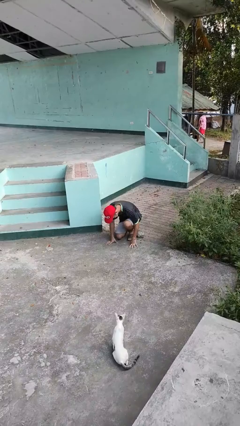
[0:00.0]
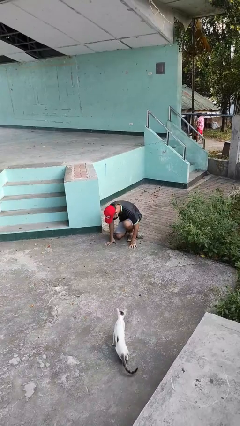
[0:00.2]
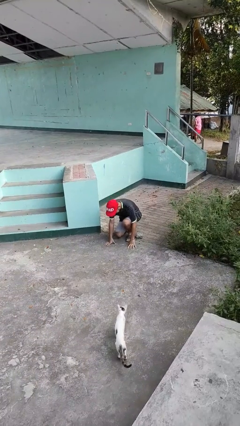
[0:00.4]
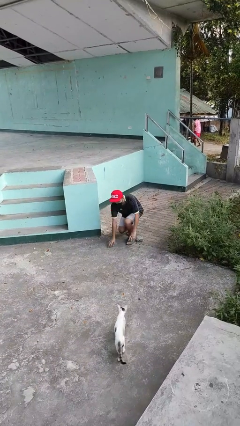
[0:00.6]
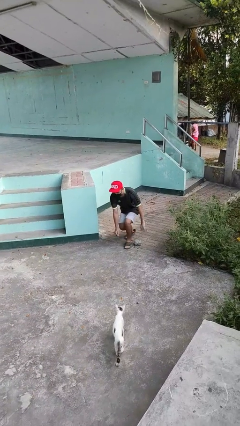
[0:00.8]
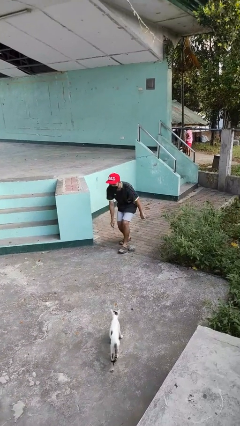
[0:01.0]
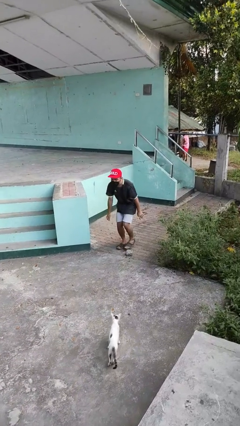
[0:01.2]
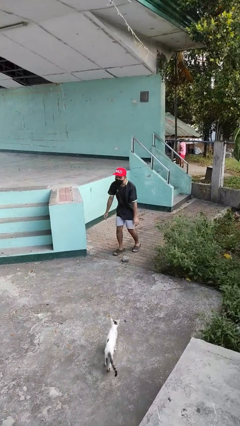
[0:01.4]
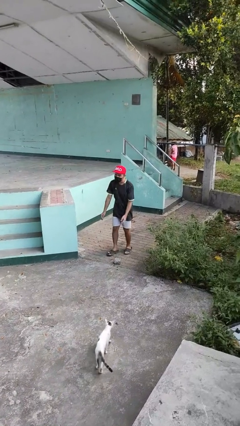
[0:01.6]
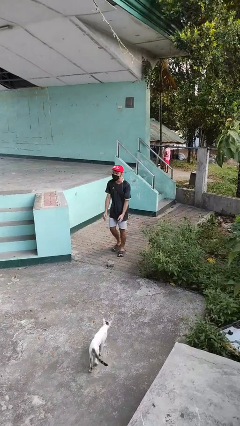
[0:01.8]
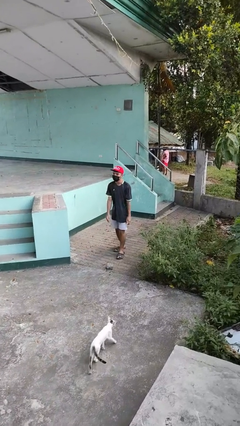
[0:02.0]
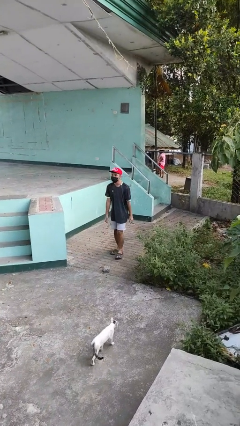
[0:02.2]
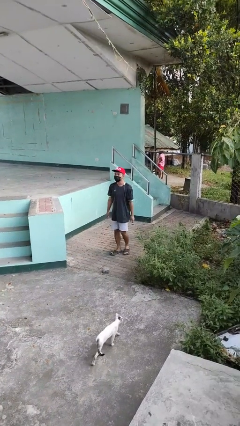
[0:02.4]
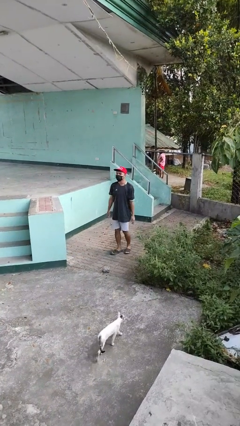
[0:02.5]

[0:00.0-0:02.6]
person stands up from floor

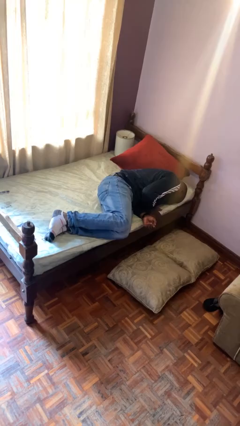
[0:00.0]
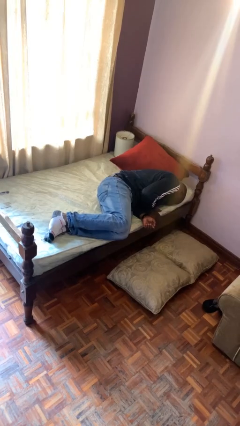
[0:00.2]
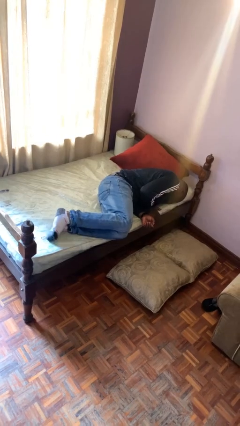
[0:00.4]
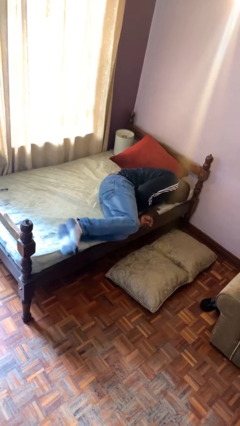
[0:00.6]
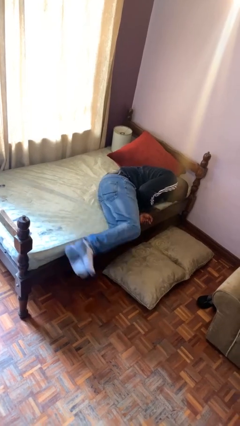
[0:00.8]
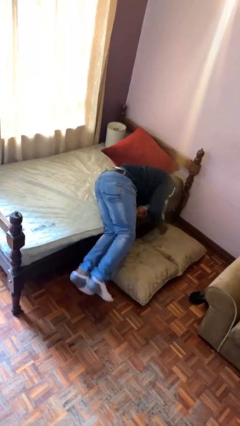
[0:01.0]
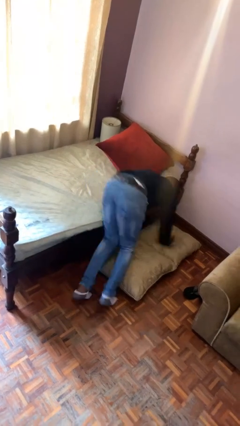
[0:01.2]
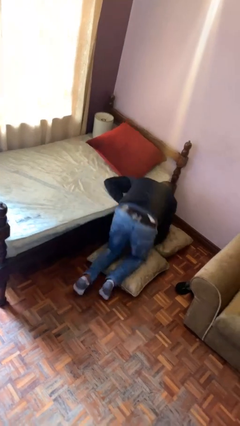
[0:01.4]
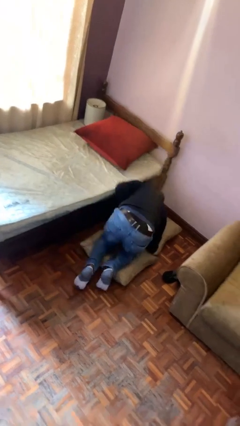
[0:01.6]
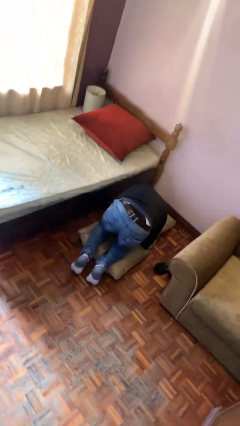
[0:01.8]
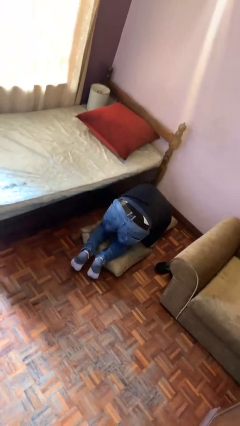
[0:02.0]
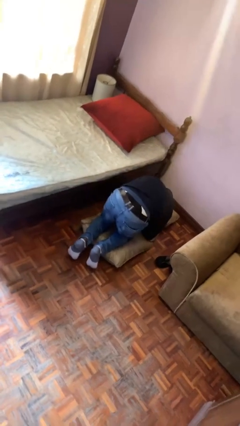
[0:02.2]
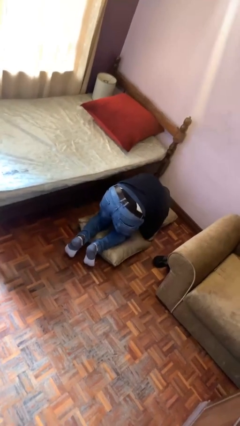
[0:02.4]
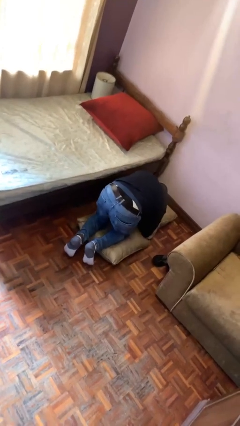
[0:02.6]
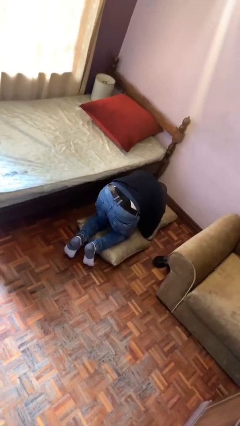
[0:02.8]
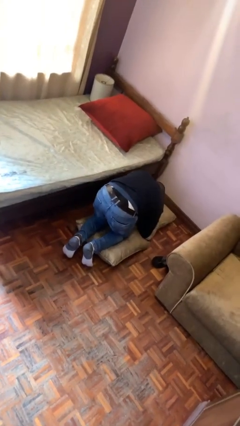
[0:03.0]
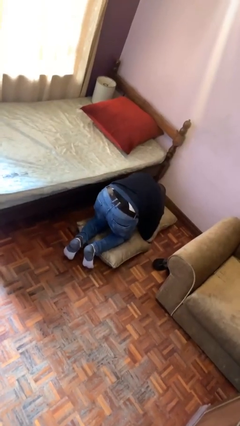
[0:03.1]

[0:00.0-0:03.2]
person falls from bed

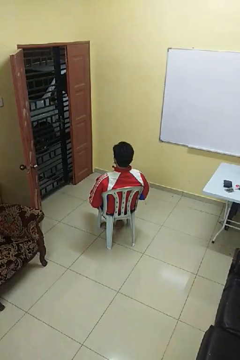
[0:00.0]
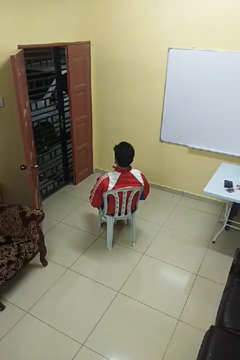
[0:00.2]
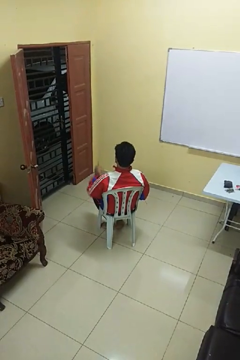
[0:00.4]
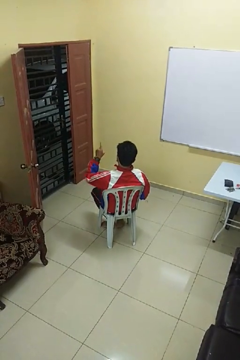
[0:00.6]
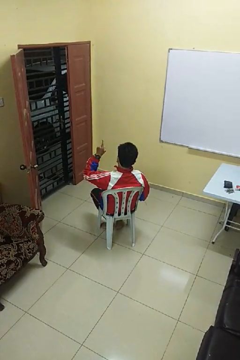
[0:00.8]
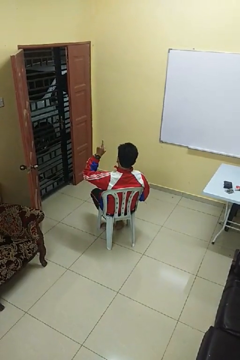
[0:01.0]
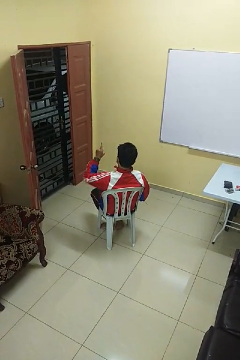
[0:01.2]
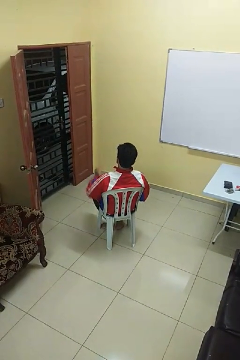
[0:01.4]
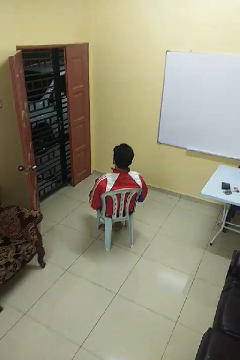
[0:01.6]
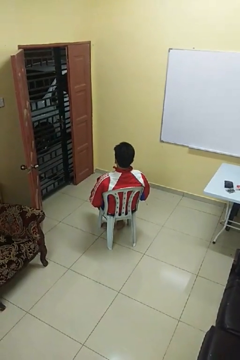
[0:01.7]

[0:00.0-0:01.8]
person gestures number one

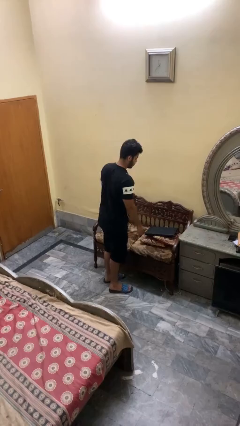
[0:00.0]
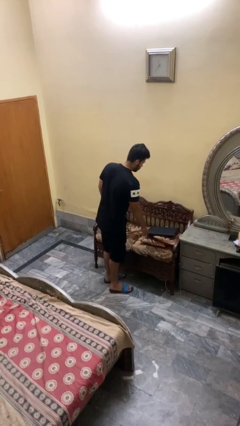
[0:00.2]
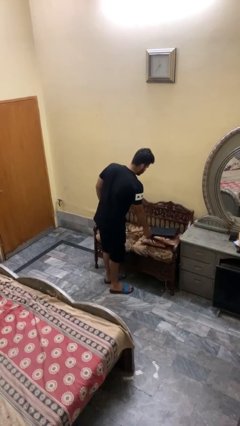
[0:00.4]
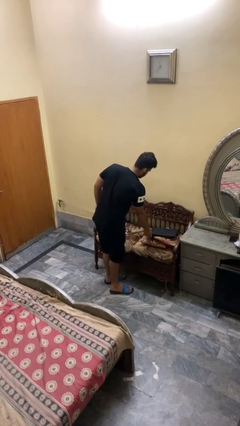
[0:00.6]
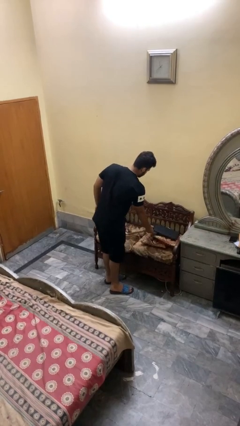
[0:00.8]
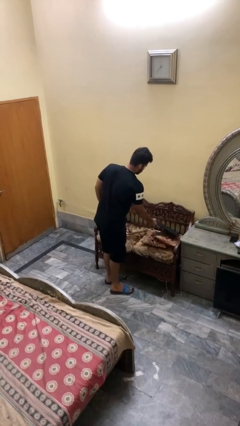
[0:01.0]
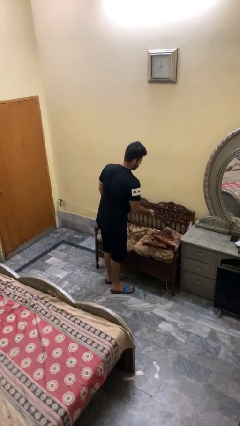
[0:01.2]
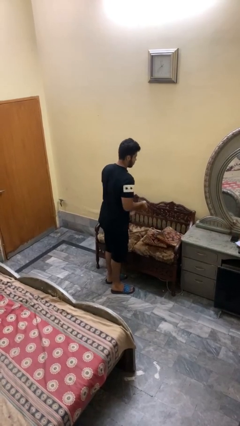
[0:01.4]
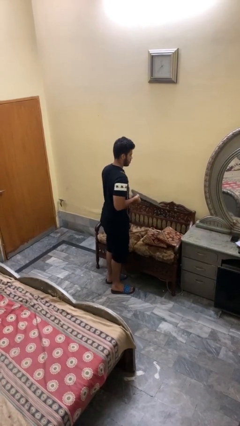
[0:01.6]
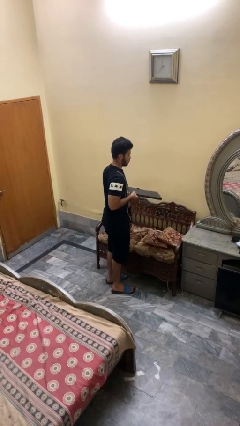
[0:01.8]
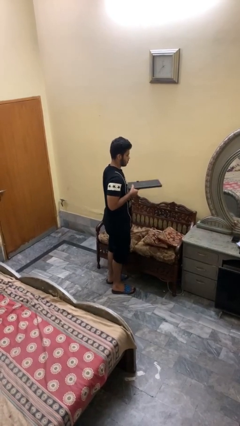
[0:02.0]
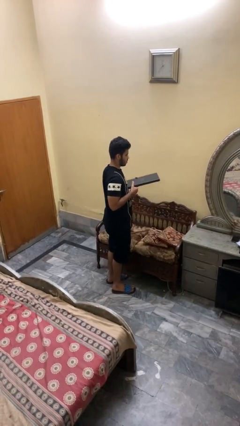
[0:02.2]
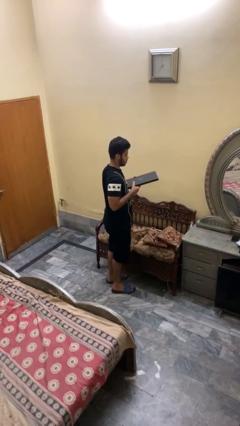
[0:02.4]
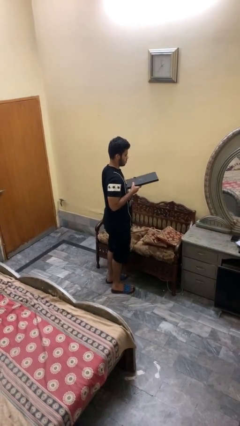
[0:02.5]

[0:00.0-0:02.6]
person picks up object from couch

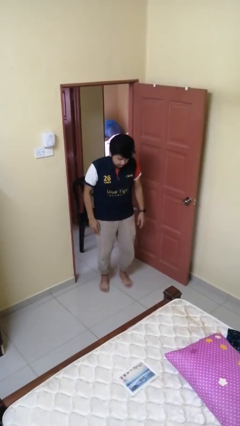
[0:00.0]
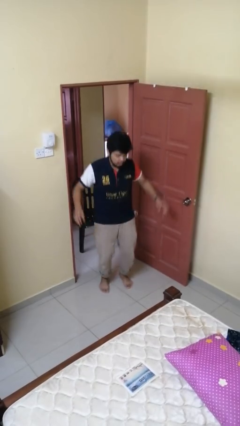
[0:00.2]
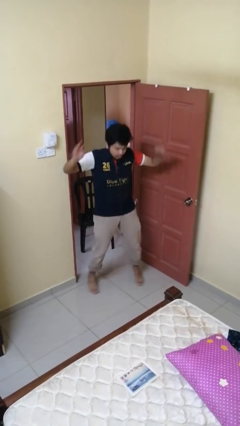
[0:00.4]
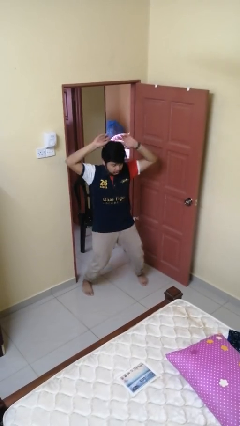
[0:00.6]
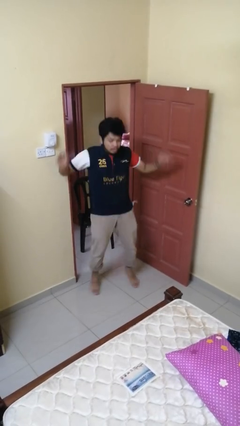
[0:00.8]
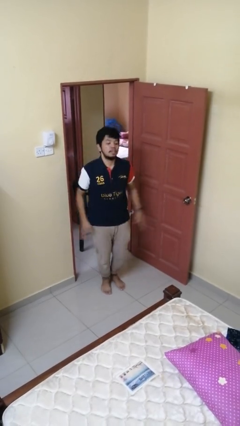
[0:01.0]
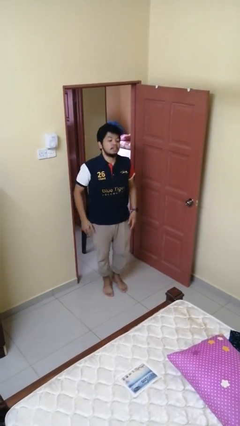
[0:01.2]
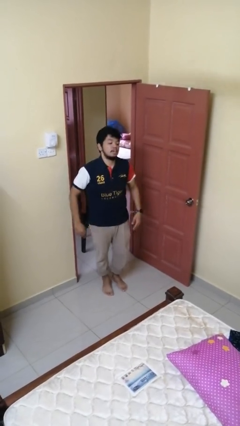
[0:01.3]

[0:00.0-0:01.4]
person exercises with jumping jacks

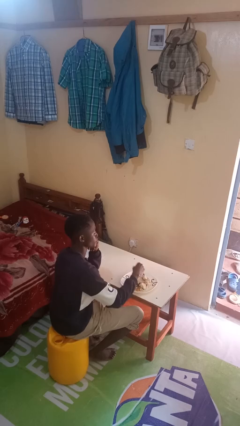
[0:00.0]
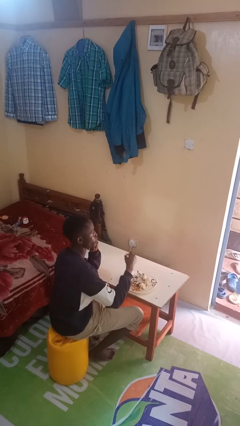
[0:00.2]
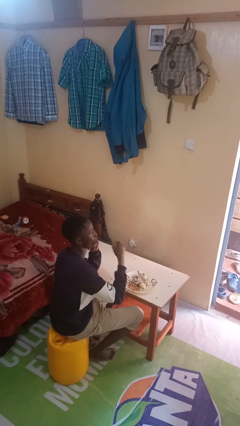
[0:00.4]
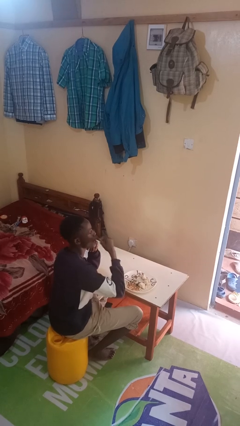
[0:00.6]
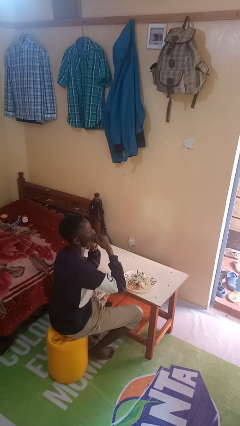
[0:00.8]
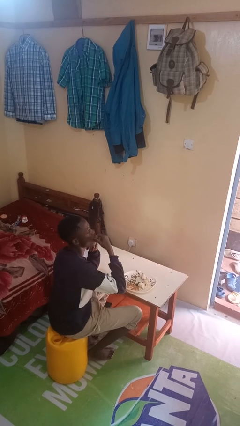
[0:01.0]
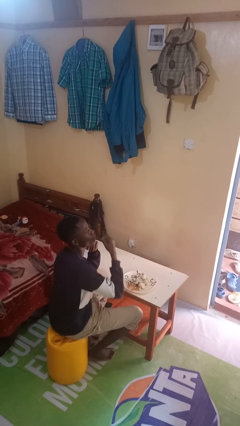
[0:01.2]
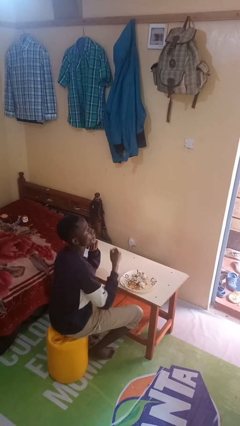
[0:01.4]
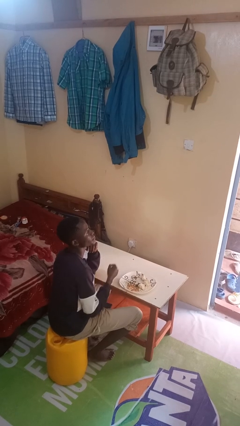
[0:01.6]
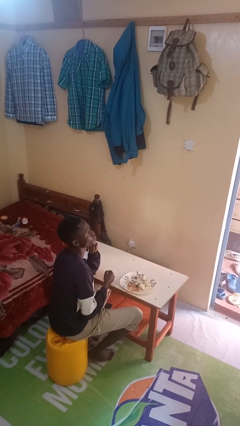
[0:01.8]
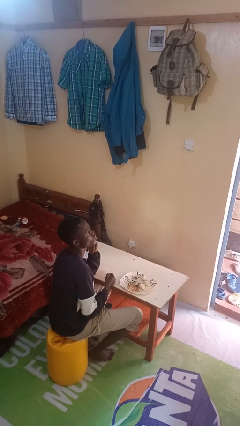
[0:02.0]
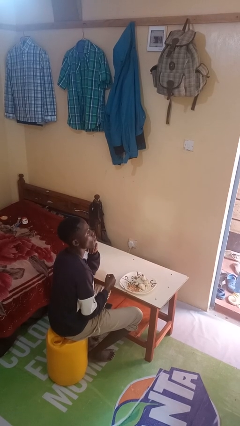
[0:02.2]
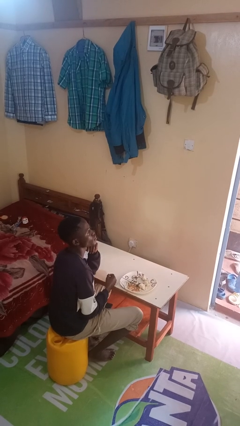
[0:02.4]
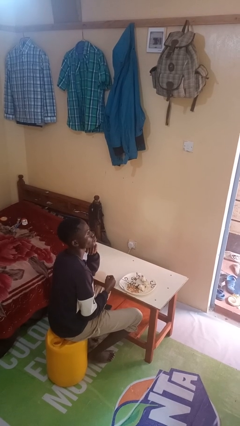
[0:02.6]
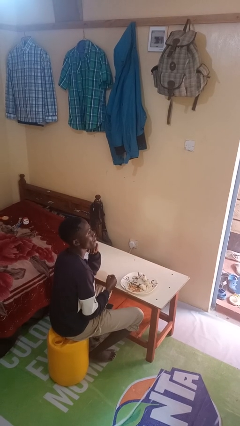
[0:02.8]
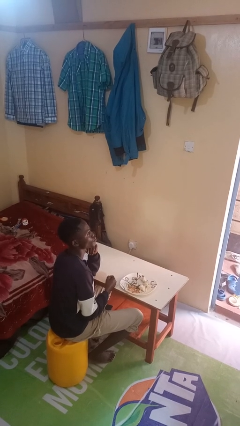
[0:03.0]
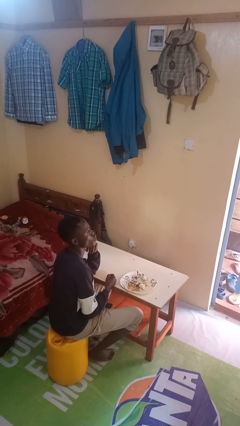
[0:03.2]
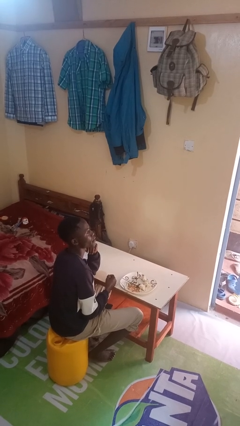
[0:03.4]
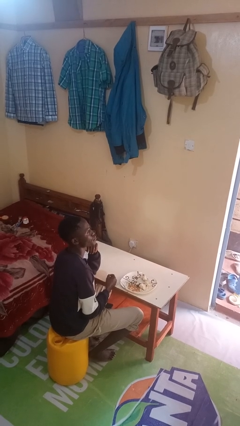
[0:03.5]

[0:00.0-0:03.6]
person eats with hands

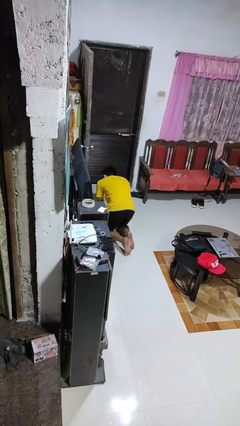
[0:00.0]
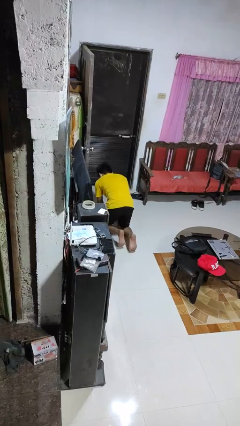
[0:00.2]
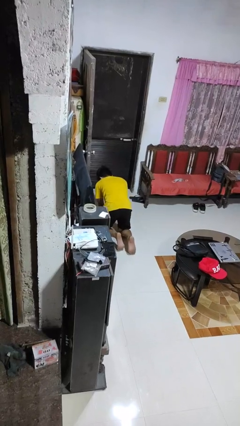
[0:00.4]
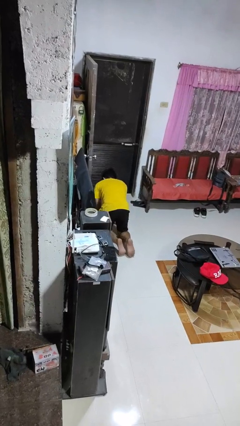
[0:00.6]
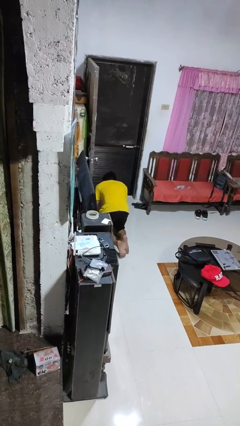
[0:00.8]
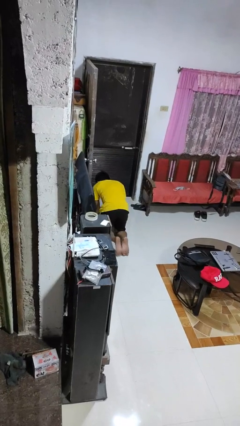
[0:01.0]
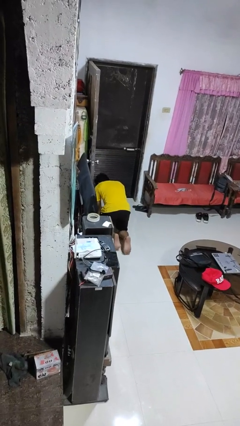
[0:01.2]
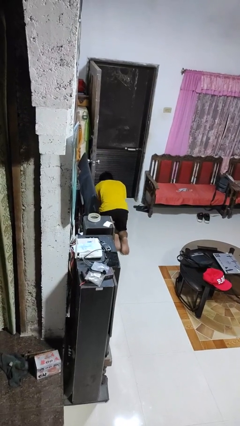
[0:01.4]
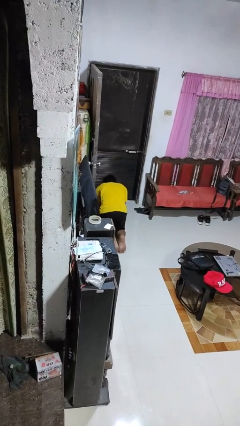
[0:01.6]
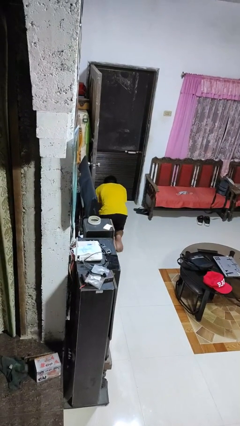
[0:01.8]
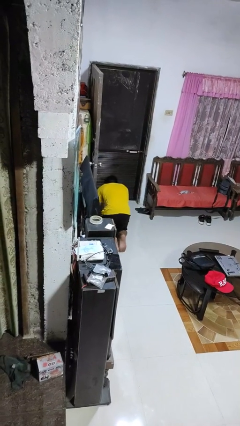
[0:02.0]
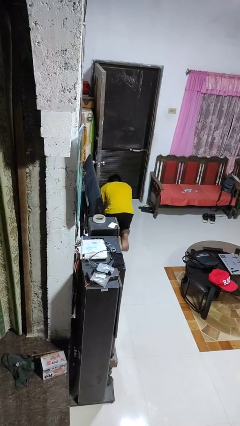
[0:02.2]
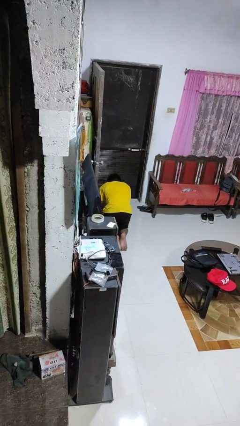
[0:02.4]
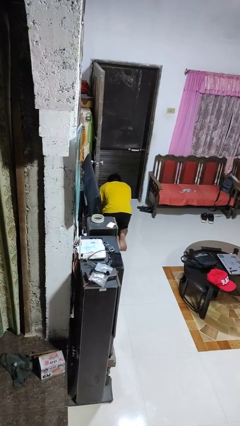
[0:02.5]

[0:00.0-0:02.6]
person crawls
